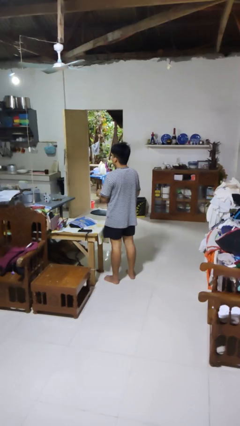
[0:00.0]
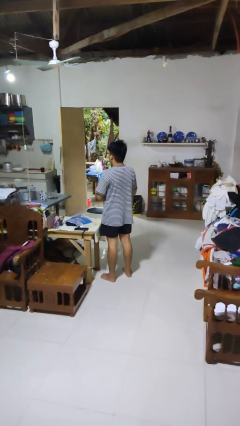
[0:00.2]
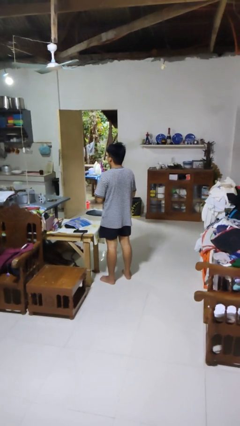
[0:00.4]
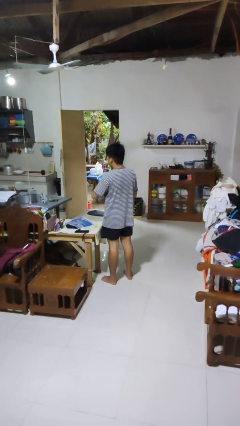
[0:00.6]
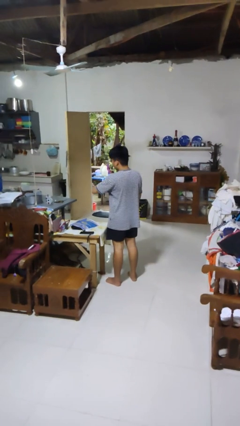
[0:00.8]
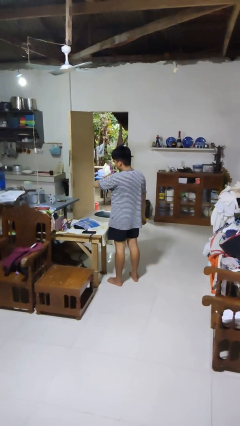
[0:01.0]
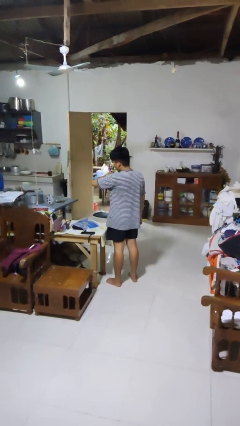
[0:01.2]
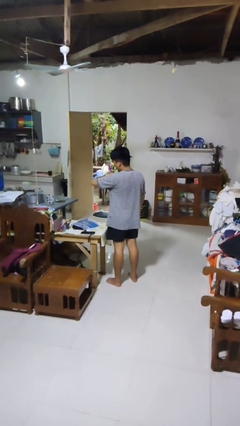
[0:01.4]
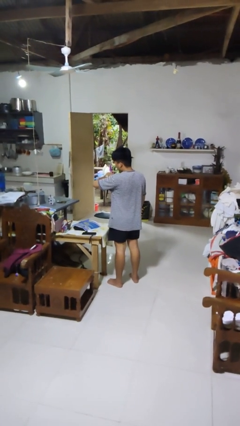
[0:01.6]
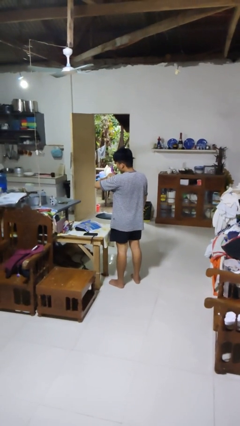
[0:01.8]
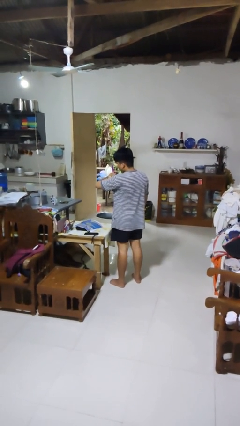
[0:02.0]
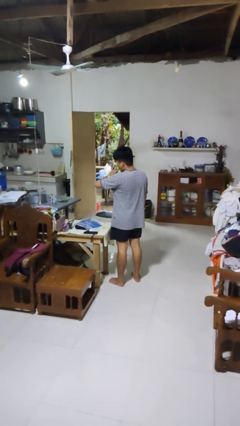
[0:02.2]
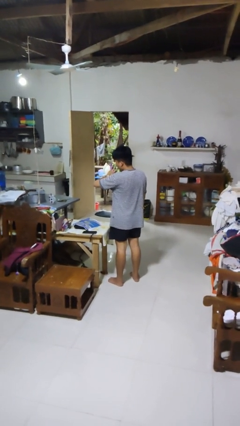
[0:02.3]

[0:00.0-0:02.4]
person looks at wristwatch

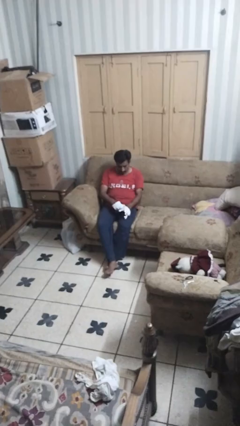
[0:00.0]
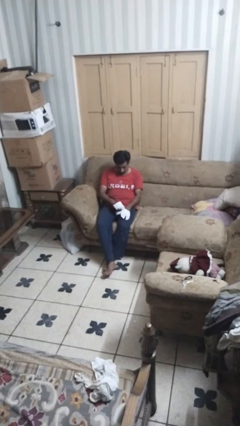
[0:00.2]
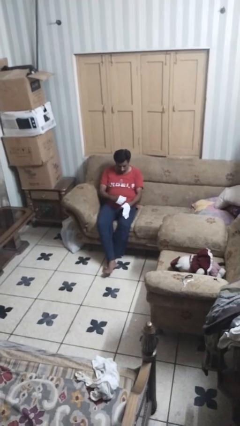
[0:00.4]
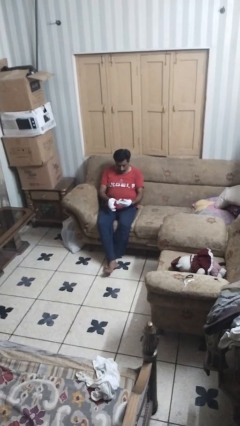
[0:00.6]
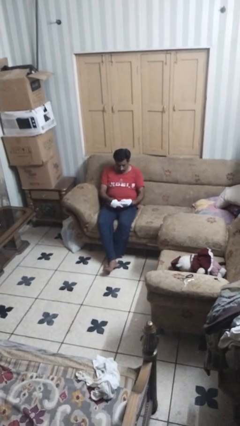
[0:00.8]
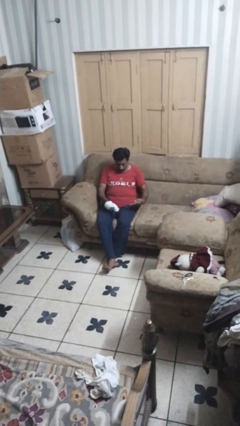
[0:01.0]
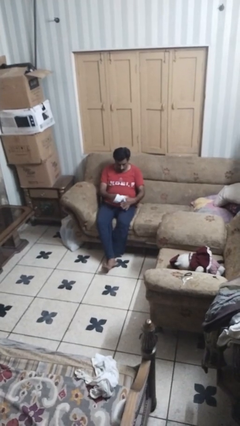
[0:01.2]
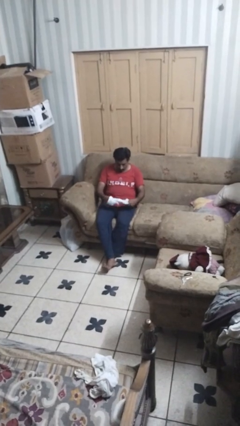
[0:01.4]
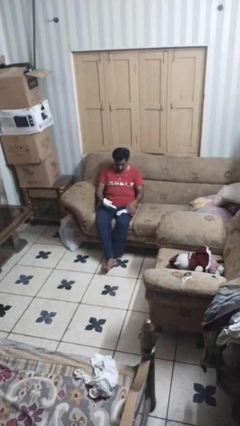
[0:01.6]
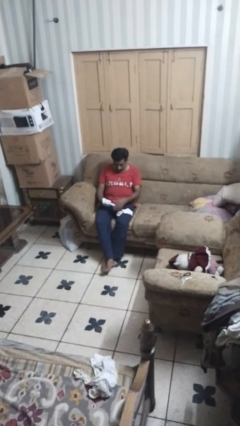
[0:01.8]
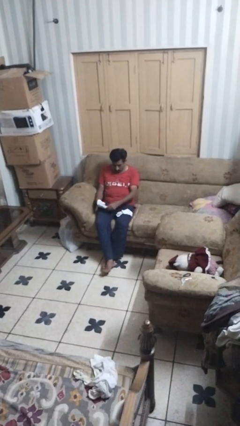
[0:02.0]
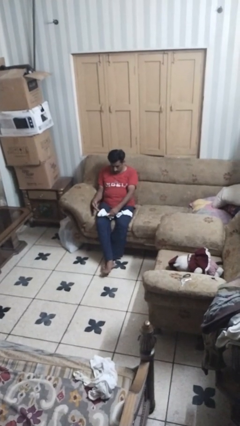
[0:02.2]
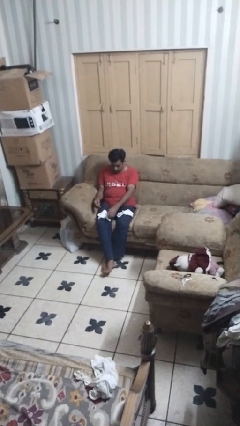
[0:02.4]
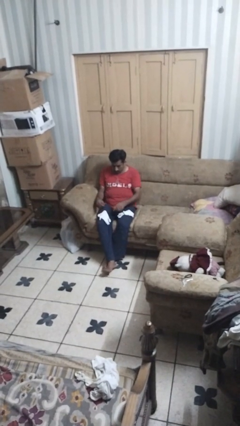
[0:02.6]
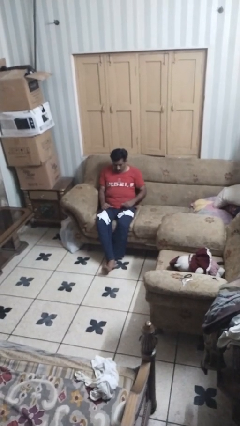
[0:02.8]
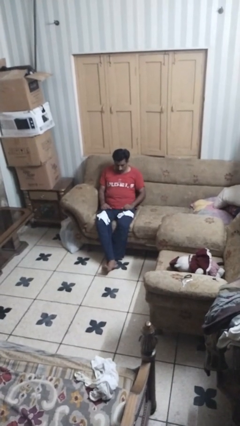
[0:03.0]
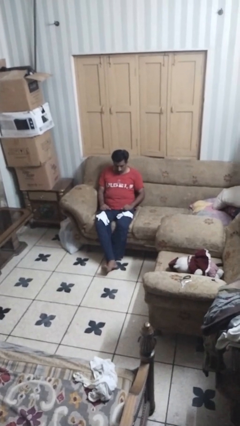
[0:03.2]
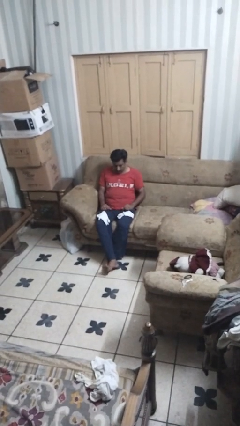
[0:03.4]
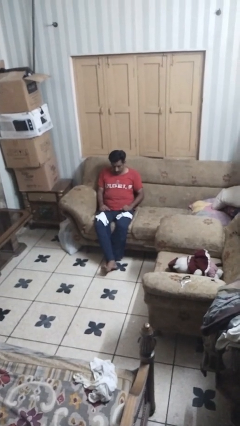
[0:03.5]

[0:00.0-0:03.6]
person takes off gloves

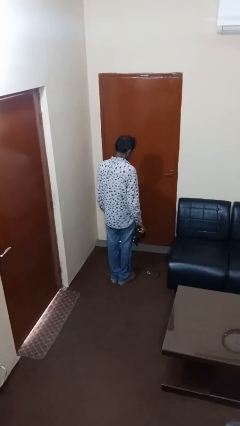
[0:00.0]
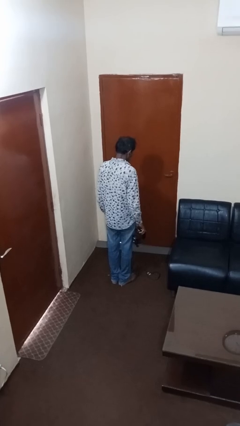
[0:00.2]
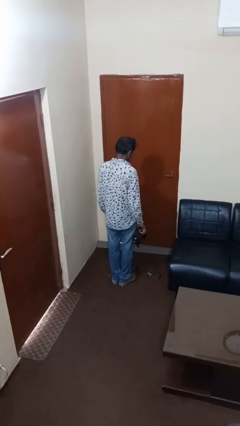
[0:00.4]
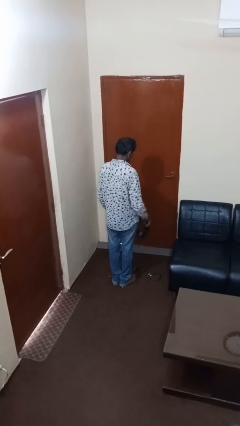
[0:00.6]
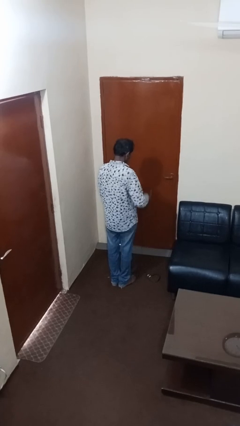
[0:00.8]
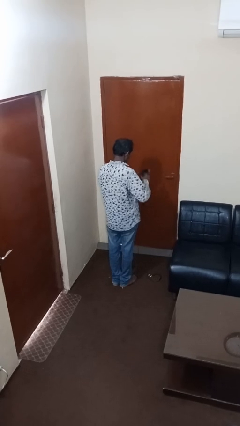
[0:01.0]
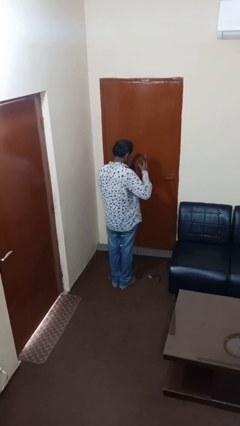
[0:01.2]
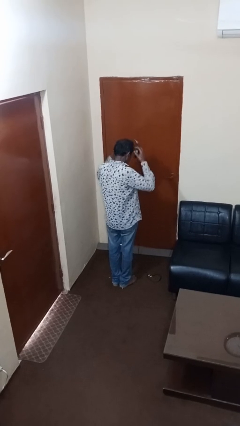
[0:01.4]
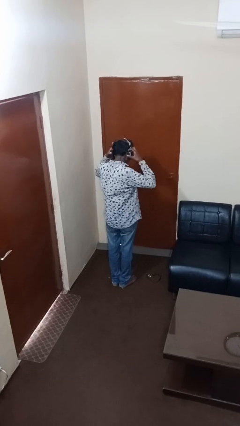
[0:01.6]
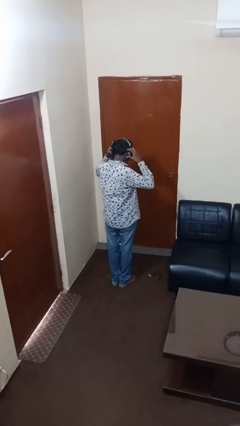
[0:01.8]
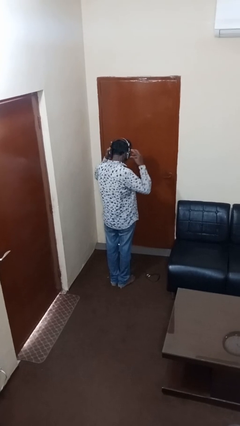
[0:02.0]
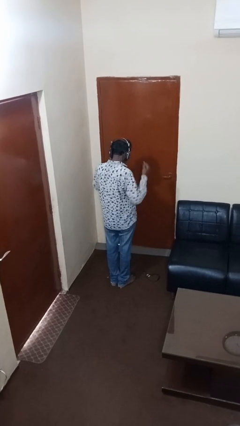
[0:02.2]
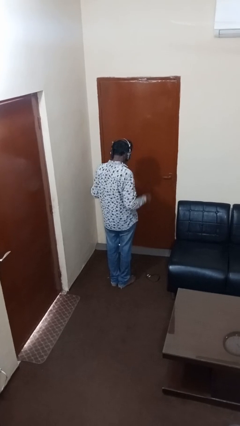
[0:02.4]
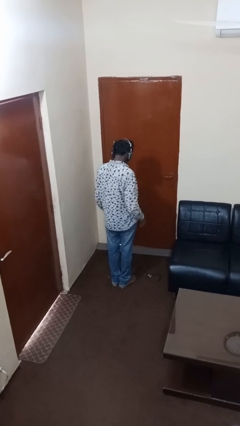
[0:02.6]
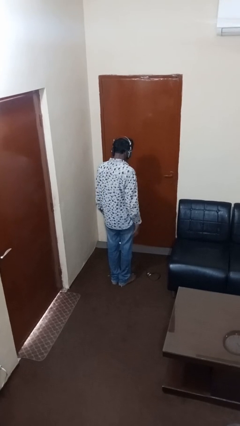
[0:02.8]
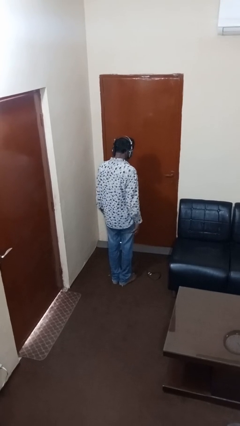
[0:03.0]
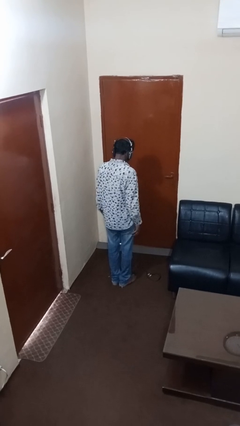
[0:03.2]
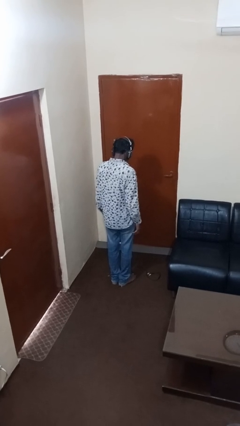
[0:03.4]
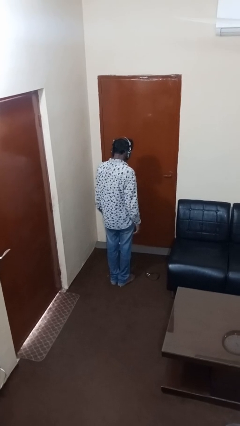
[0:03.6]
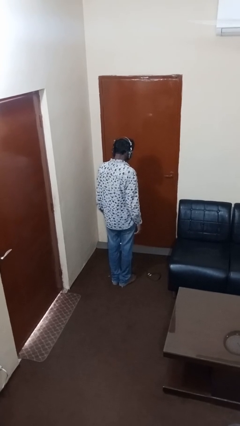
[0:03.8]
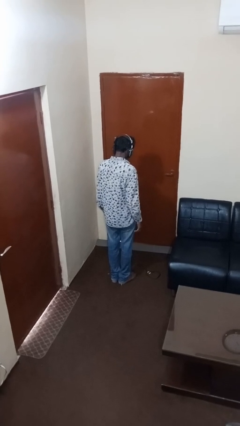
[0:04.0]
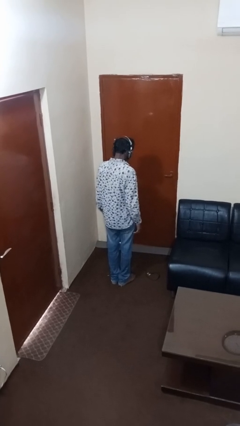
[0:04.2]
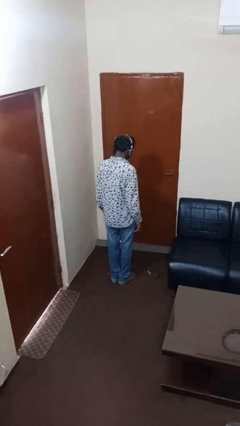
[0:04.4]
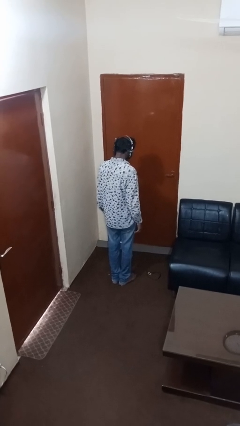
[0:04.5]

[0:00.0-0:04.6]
person puts on headphones

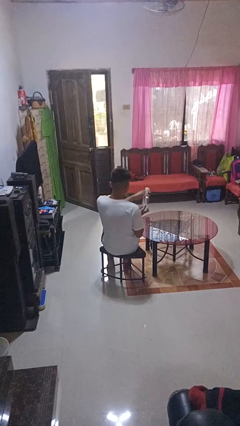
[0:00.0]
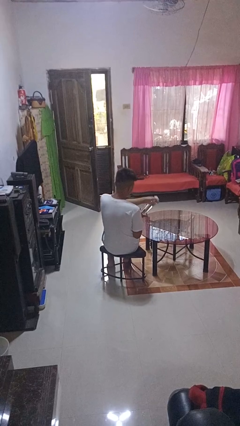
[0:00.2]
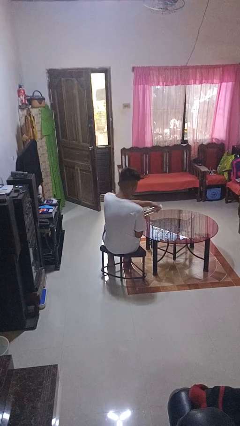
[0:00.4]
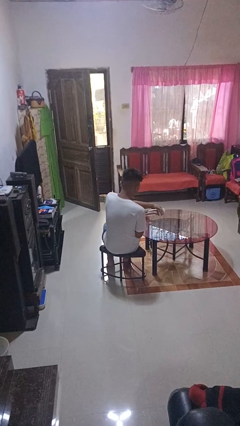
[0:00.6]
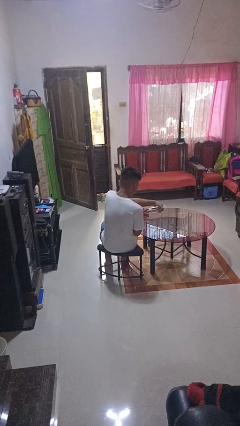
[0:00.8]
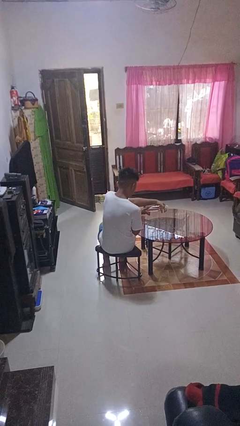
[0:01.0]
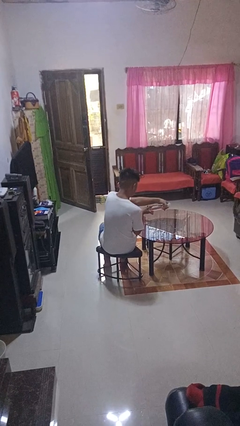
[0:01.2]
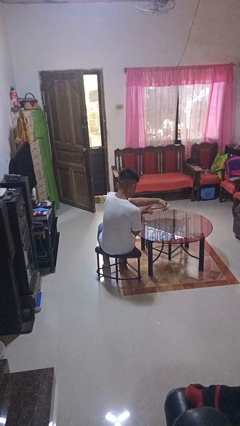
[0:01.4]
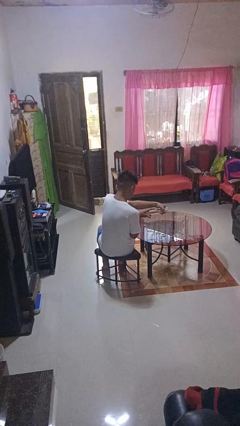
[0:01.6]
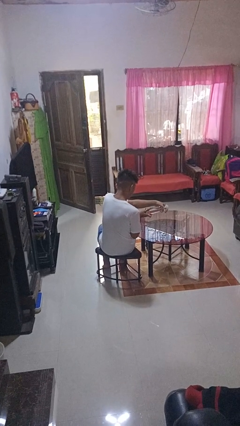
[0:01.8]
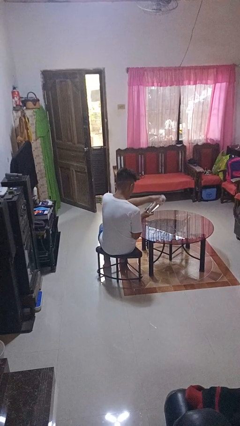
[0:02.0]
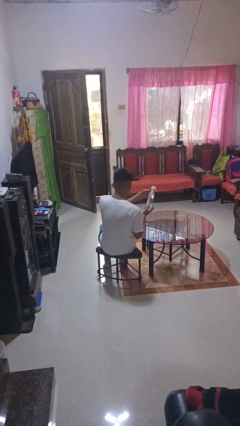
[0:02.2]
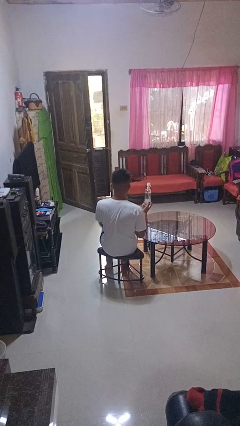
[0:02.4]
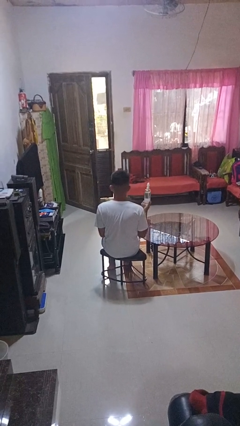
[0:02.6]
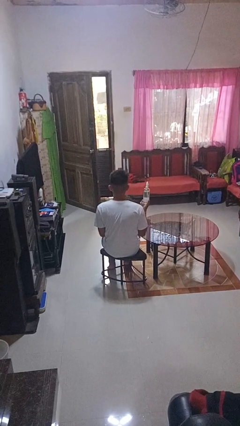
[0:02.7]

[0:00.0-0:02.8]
person sprays from bottle

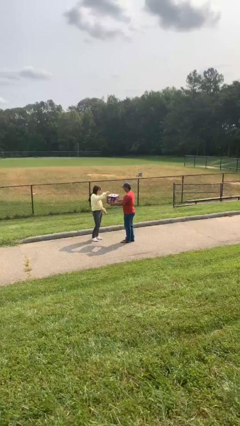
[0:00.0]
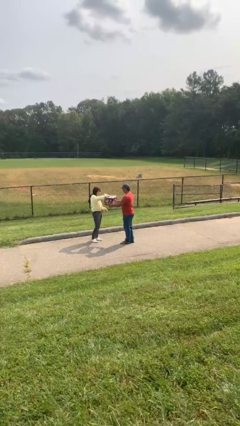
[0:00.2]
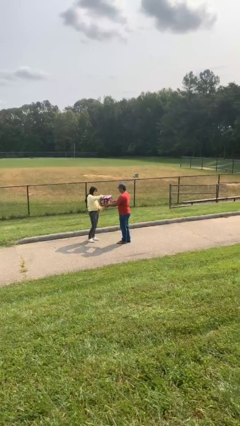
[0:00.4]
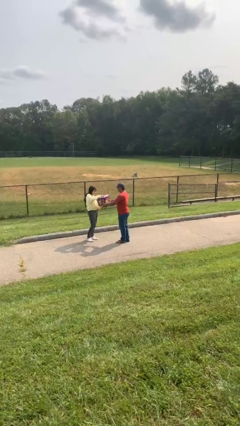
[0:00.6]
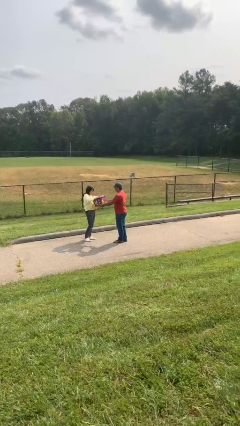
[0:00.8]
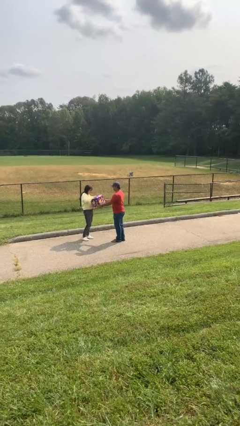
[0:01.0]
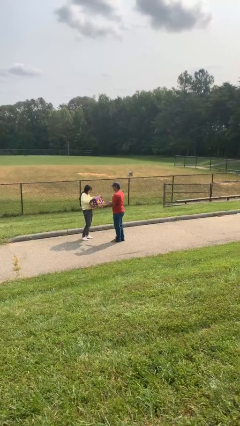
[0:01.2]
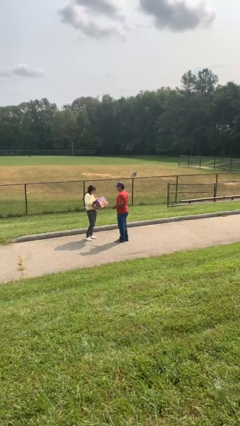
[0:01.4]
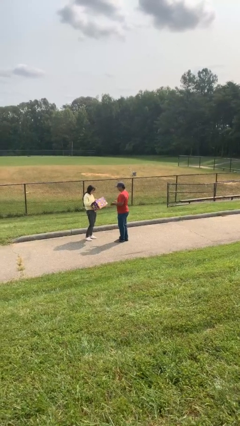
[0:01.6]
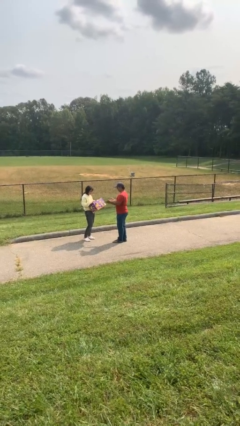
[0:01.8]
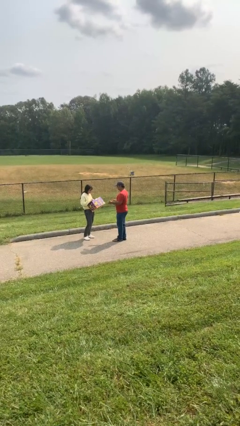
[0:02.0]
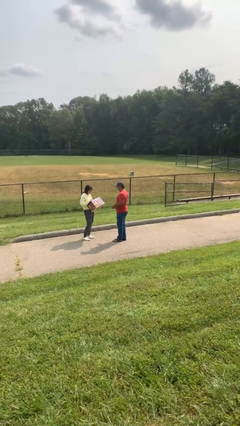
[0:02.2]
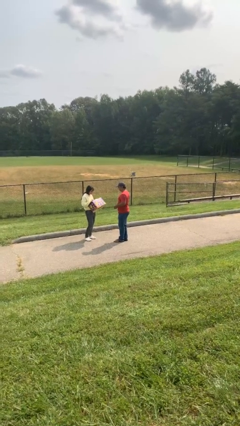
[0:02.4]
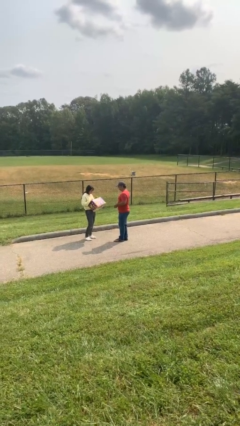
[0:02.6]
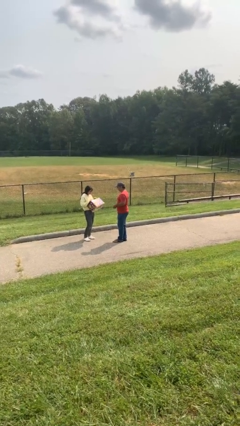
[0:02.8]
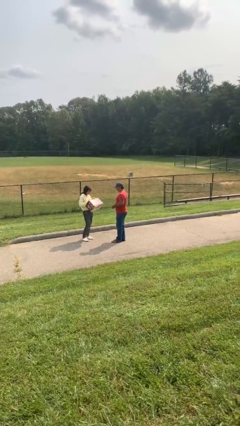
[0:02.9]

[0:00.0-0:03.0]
person transfers object to person

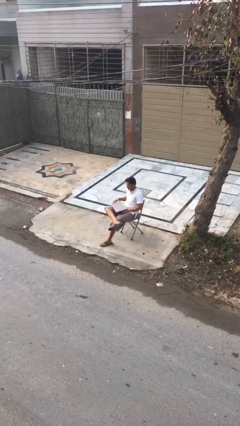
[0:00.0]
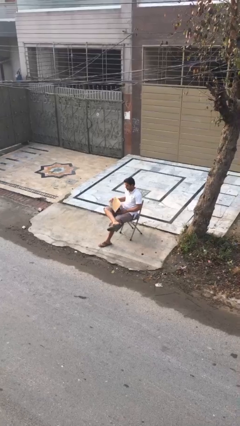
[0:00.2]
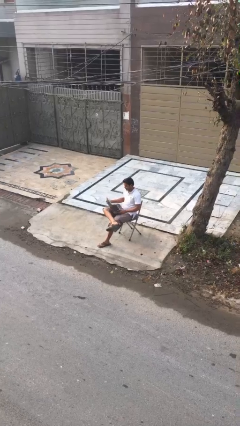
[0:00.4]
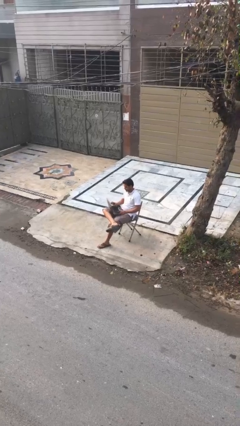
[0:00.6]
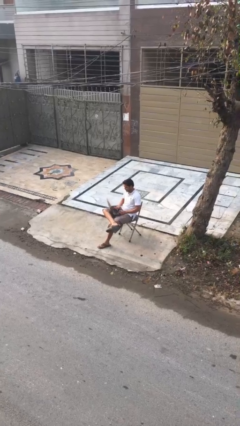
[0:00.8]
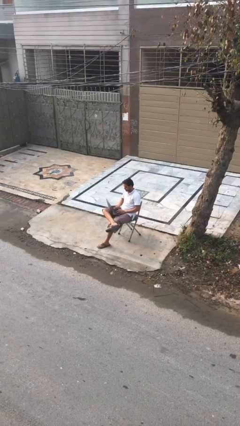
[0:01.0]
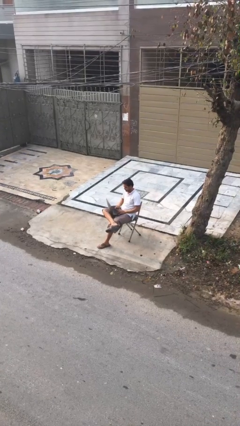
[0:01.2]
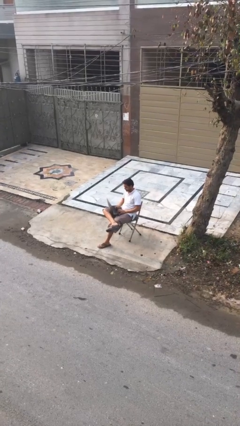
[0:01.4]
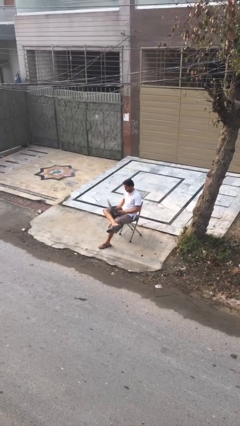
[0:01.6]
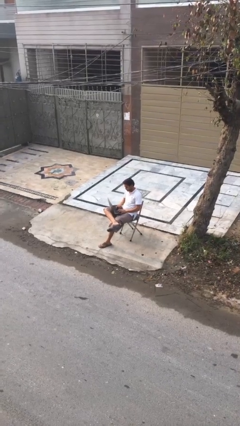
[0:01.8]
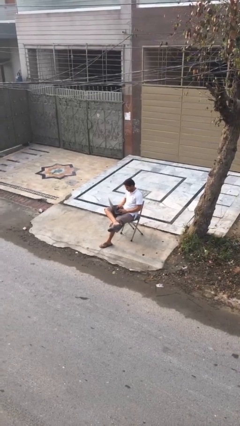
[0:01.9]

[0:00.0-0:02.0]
person interacts with laptop
